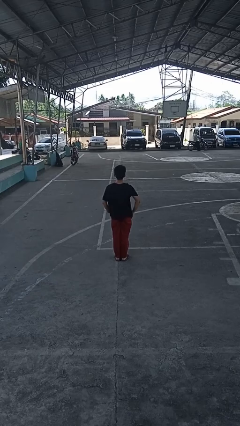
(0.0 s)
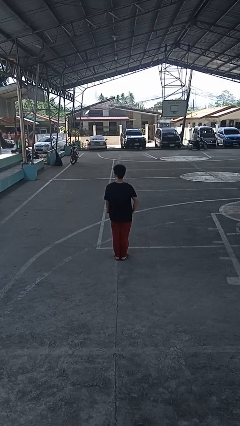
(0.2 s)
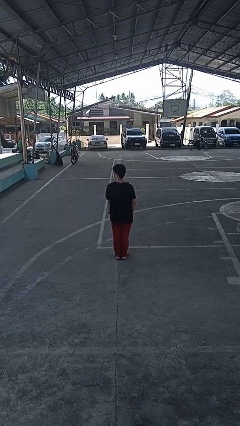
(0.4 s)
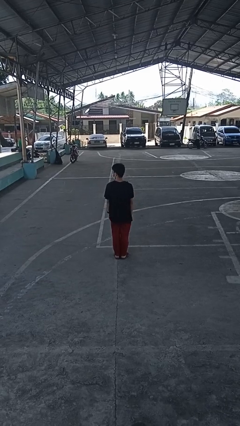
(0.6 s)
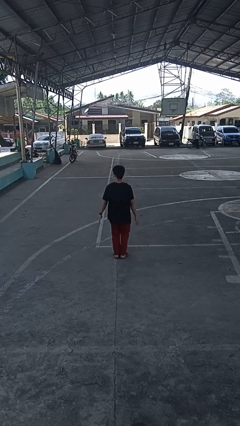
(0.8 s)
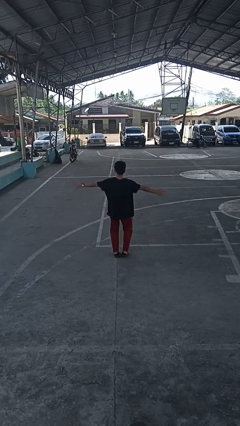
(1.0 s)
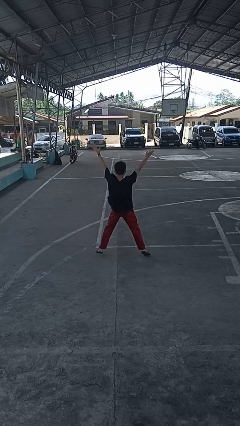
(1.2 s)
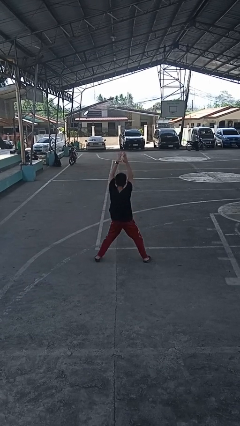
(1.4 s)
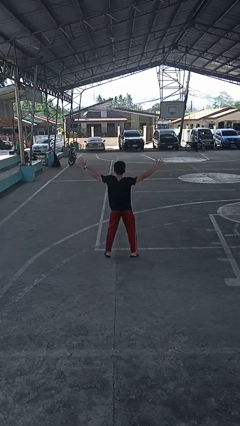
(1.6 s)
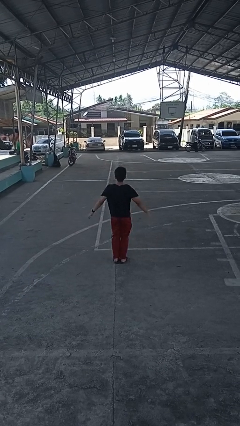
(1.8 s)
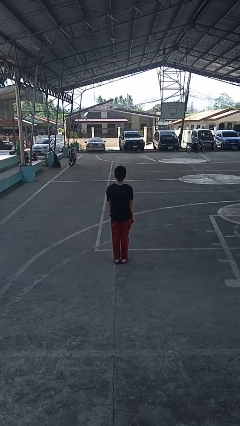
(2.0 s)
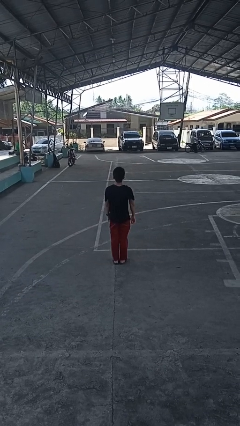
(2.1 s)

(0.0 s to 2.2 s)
person exercises with jumping jacks

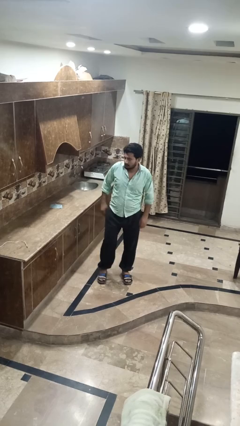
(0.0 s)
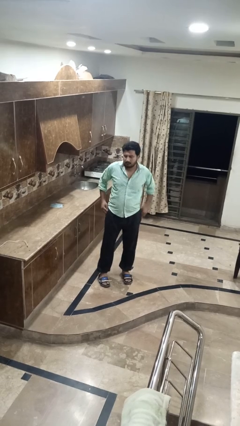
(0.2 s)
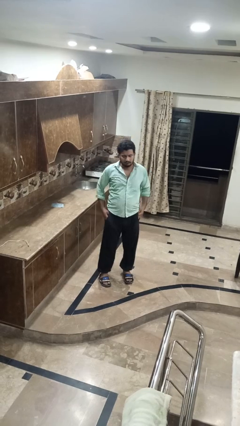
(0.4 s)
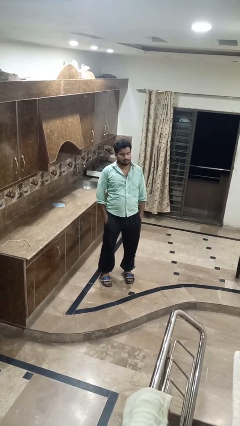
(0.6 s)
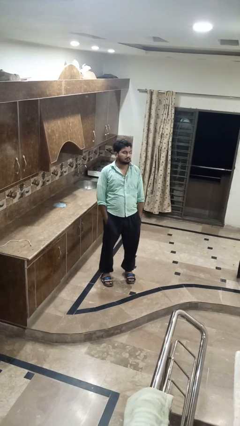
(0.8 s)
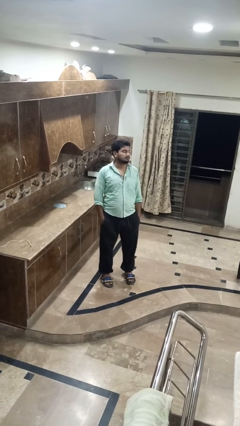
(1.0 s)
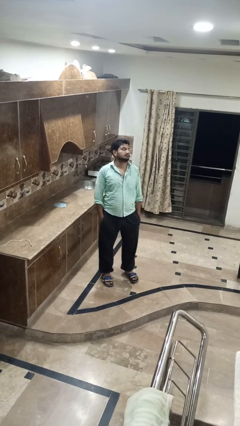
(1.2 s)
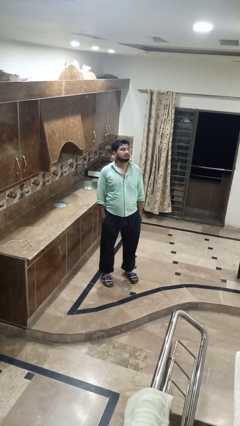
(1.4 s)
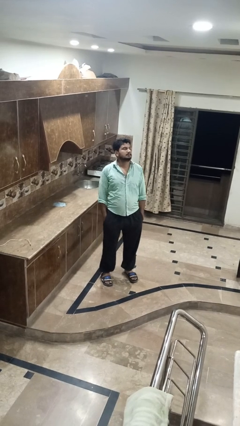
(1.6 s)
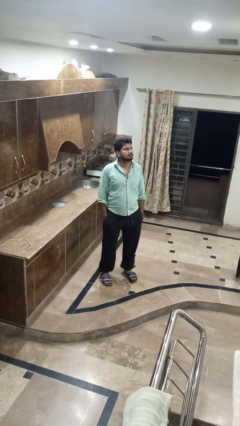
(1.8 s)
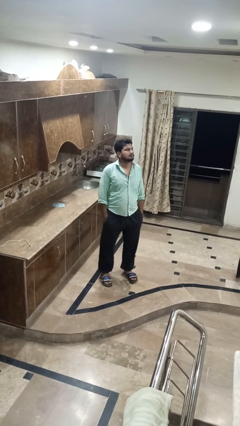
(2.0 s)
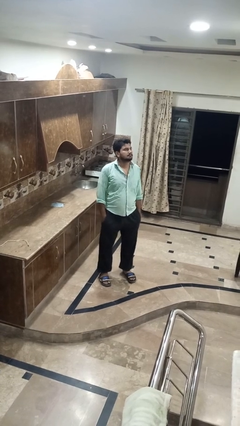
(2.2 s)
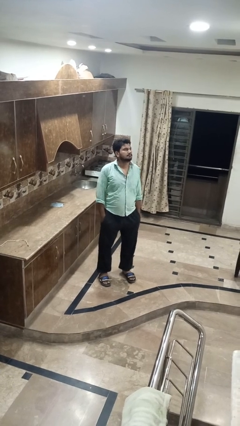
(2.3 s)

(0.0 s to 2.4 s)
person puts hands in back pockets

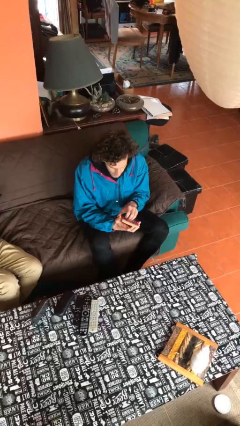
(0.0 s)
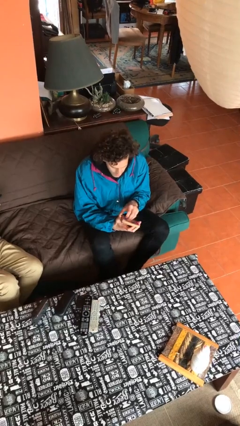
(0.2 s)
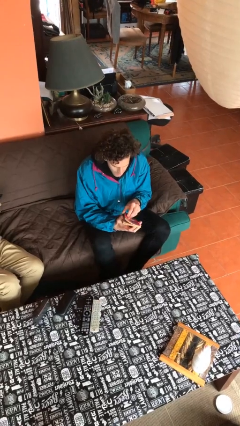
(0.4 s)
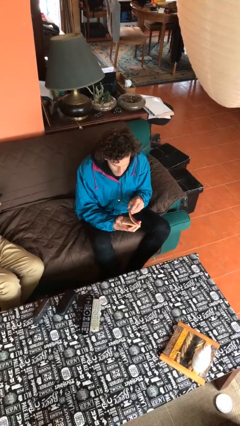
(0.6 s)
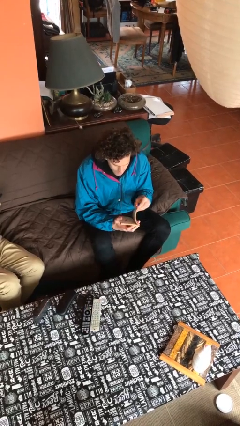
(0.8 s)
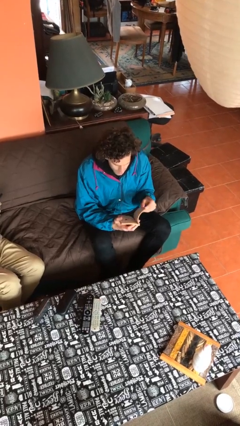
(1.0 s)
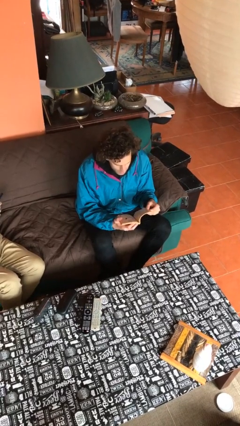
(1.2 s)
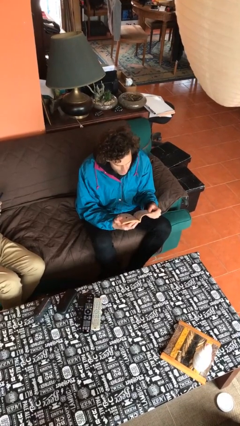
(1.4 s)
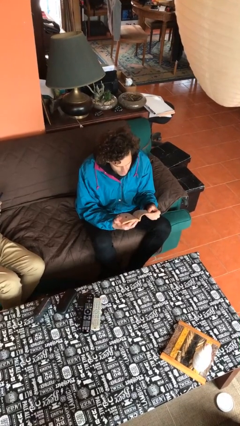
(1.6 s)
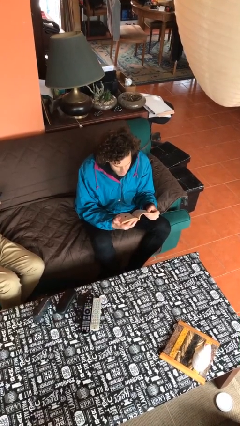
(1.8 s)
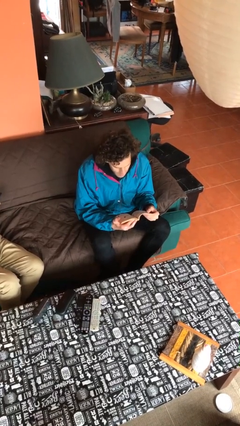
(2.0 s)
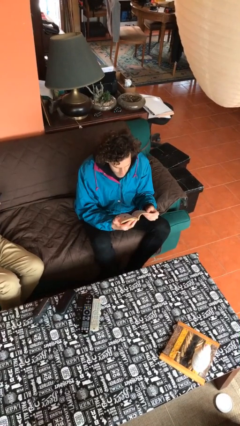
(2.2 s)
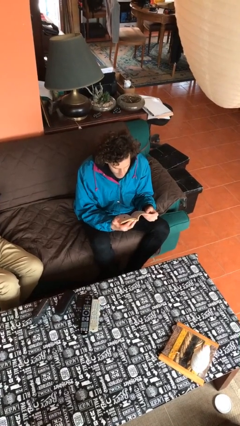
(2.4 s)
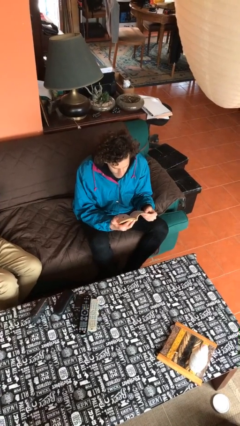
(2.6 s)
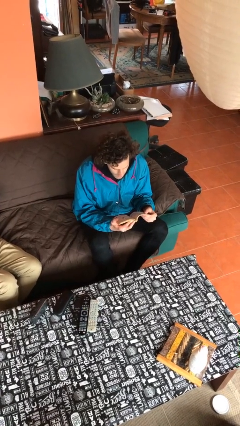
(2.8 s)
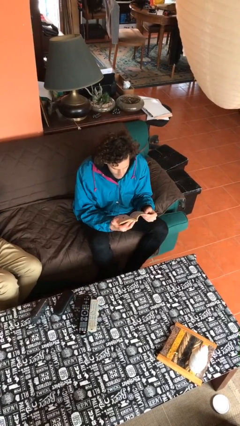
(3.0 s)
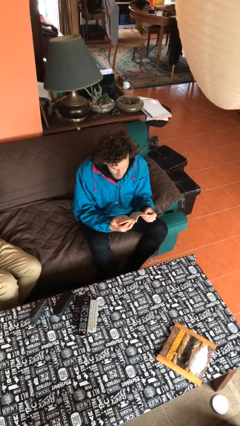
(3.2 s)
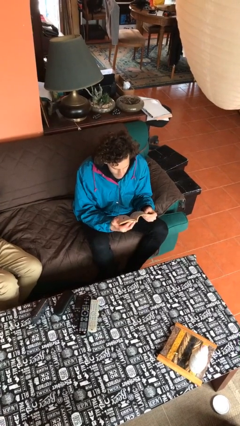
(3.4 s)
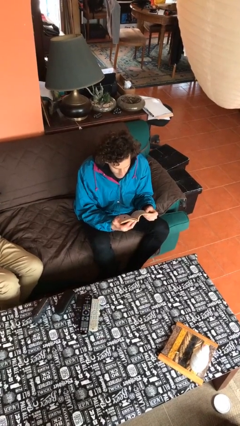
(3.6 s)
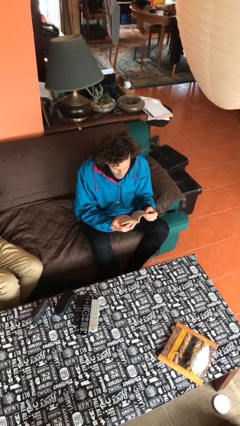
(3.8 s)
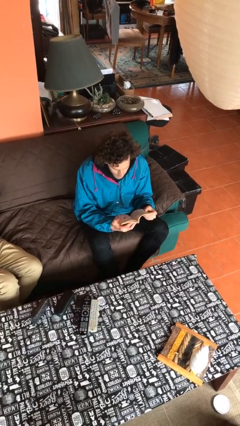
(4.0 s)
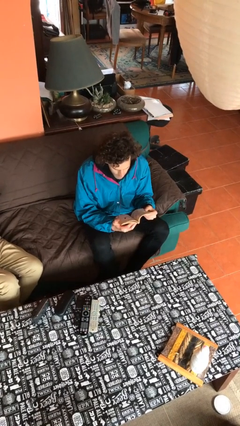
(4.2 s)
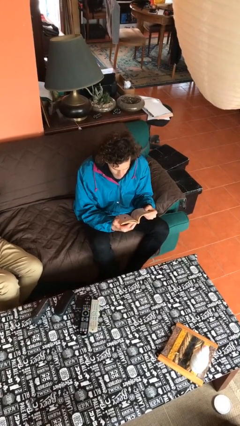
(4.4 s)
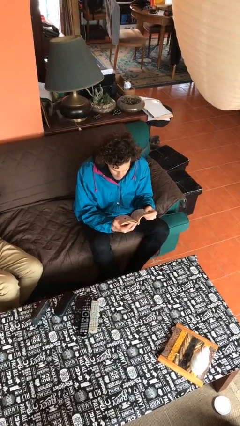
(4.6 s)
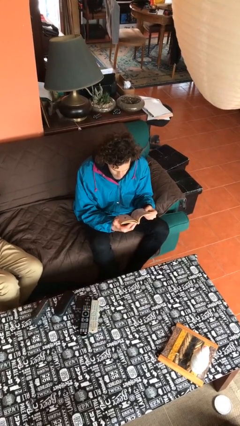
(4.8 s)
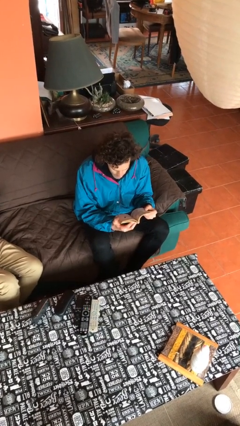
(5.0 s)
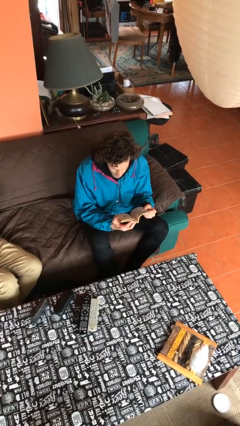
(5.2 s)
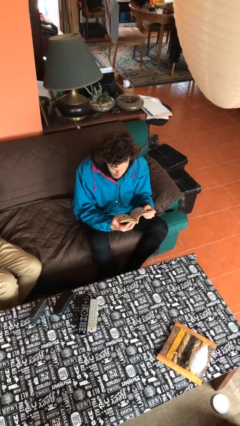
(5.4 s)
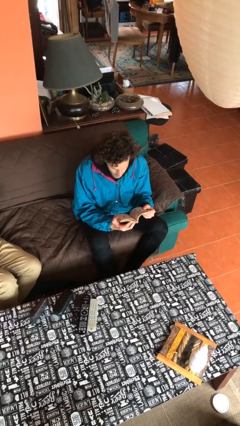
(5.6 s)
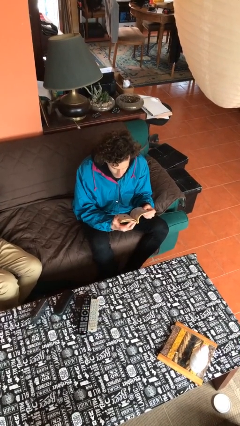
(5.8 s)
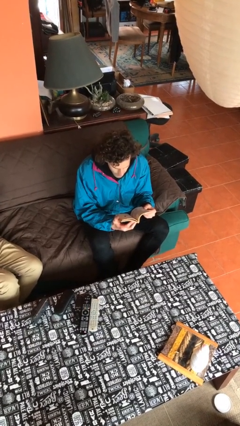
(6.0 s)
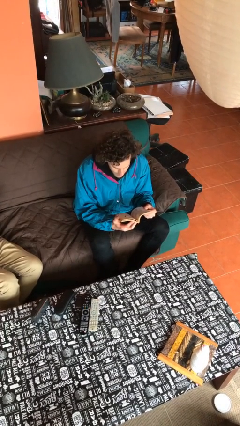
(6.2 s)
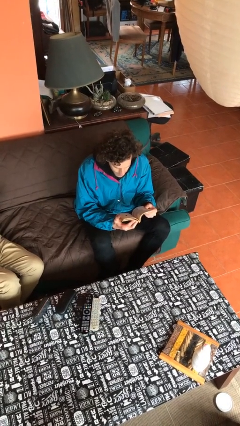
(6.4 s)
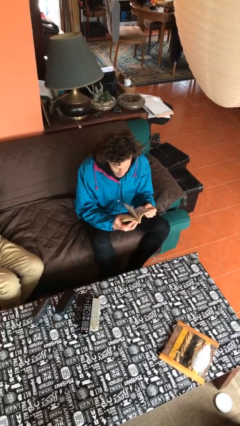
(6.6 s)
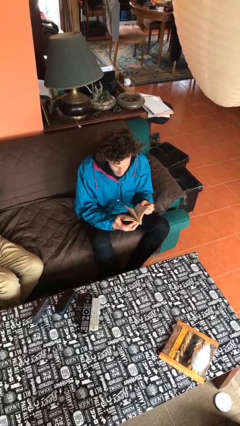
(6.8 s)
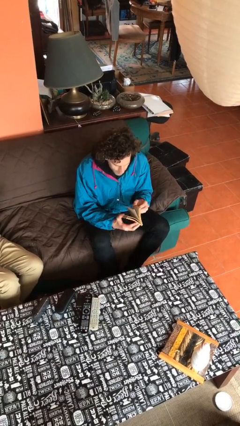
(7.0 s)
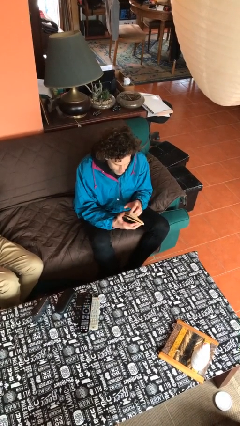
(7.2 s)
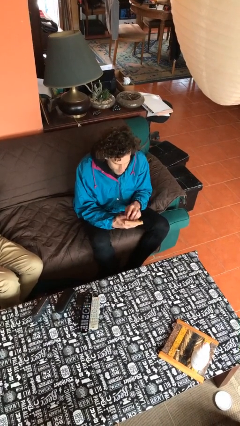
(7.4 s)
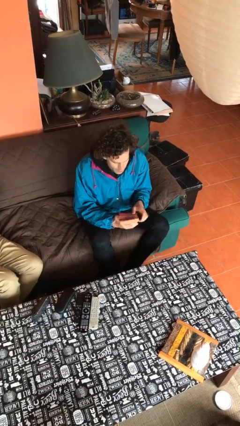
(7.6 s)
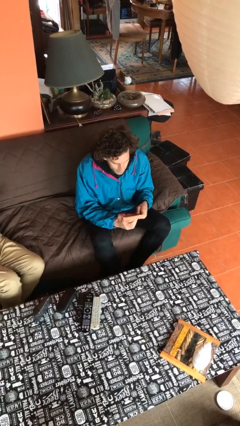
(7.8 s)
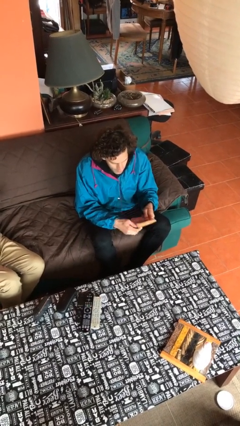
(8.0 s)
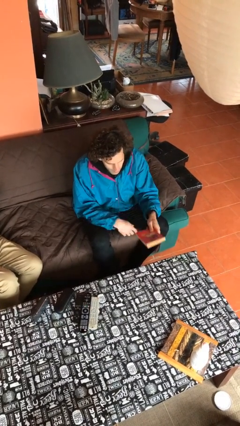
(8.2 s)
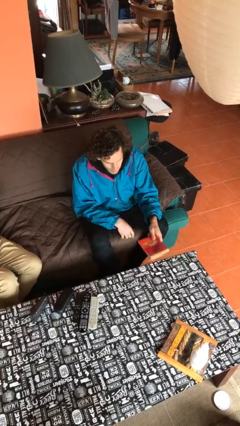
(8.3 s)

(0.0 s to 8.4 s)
person reads document

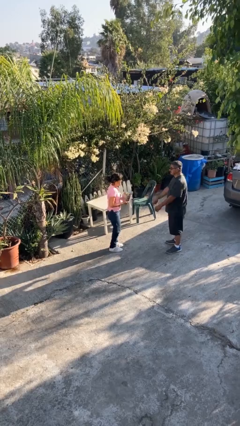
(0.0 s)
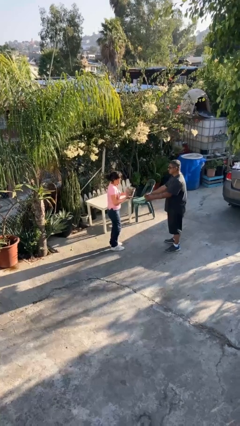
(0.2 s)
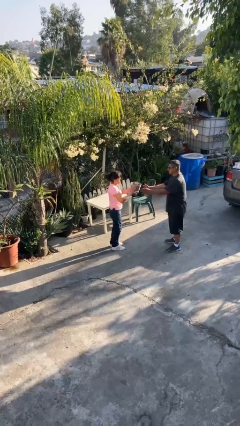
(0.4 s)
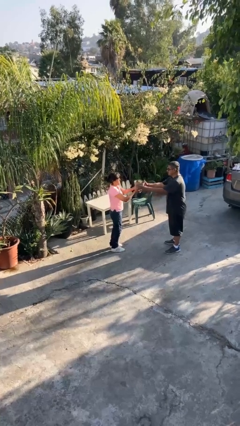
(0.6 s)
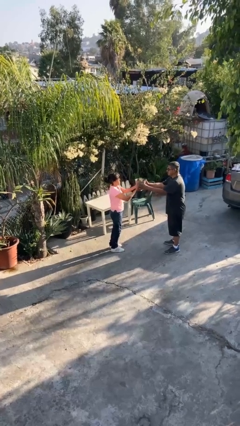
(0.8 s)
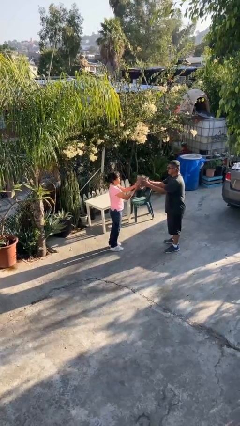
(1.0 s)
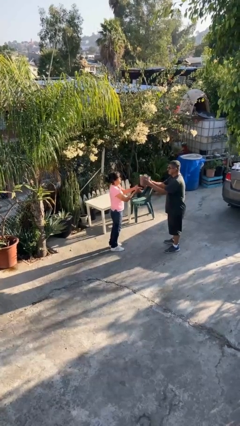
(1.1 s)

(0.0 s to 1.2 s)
person transfers object to person

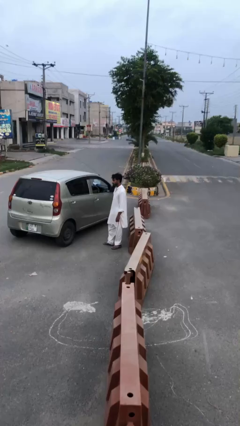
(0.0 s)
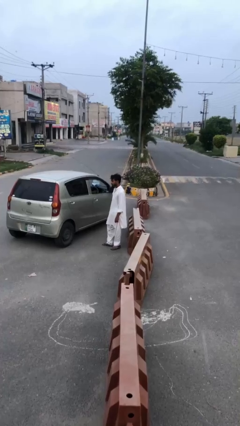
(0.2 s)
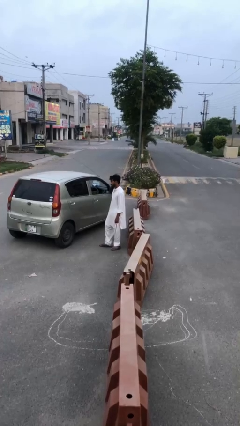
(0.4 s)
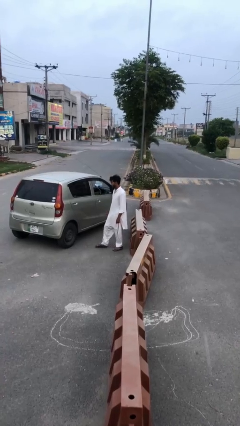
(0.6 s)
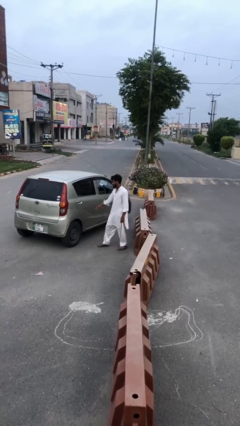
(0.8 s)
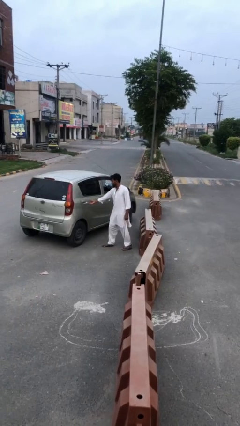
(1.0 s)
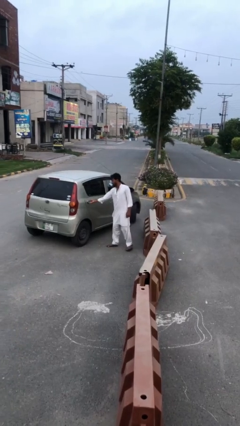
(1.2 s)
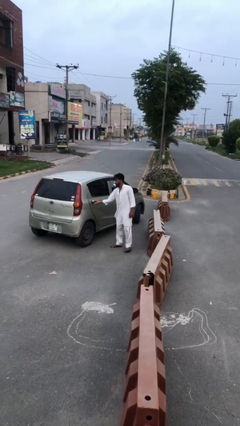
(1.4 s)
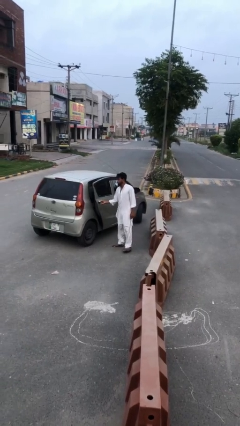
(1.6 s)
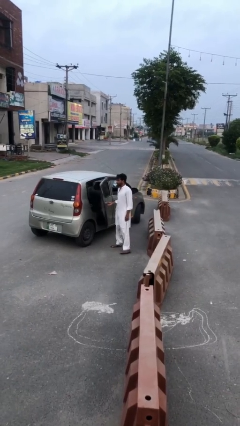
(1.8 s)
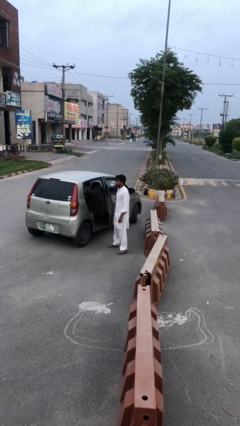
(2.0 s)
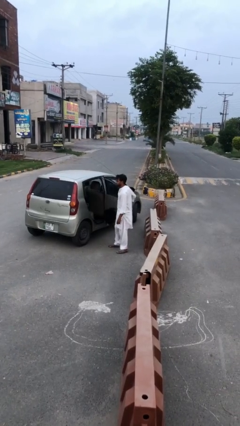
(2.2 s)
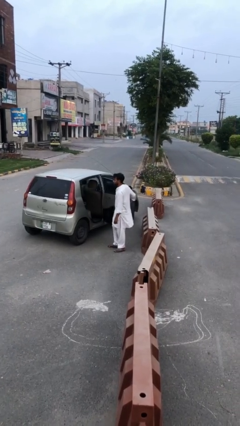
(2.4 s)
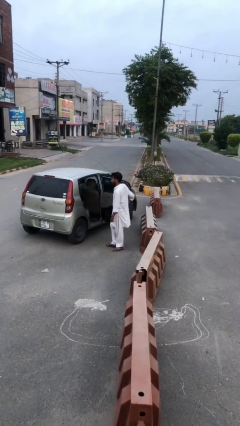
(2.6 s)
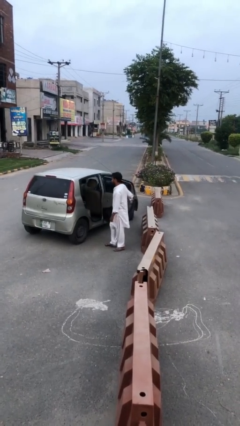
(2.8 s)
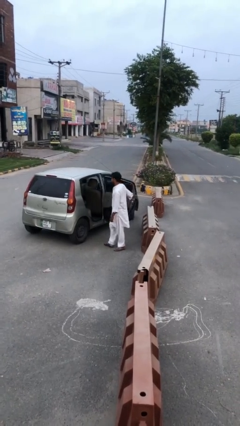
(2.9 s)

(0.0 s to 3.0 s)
person opens car door

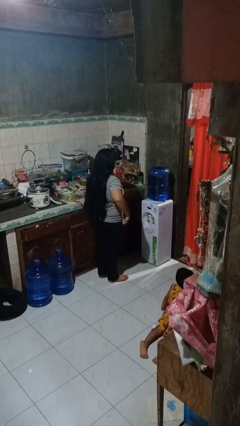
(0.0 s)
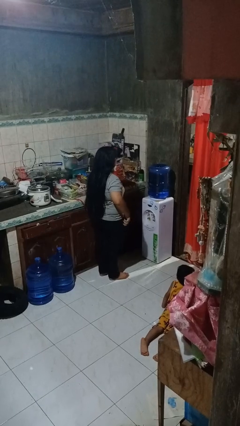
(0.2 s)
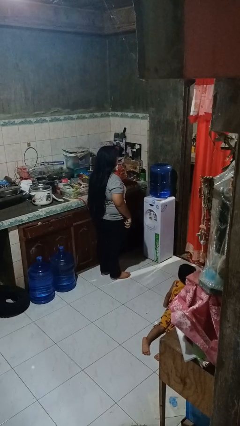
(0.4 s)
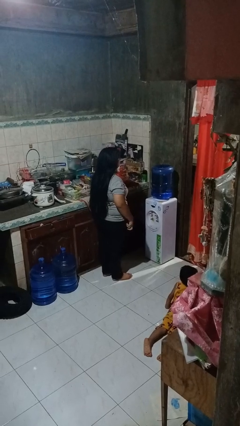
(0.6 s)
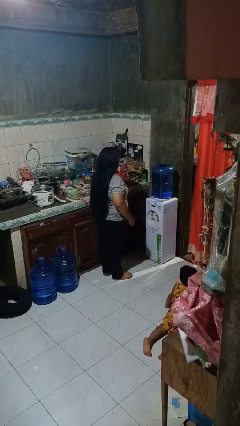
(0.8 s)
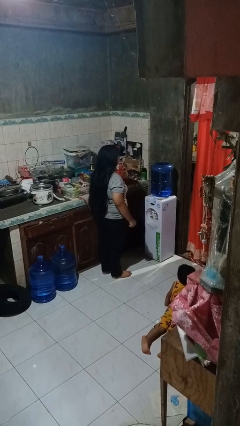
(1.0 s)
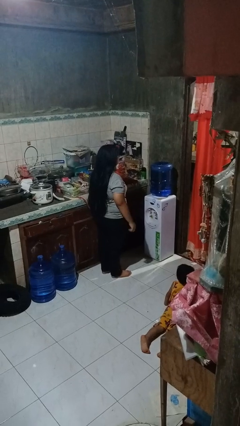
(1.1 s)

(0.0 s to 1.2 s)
person puts phone into pocket
